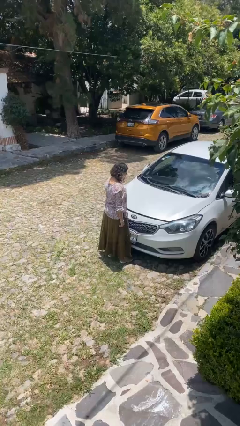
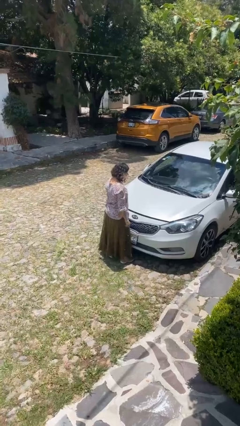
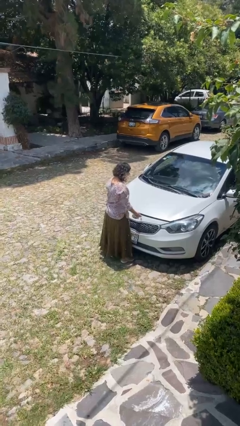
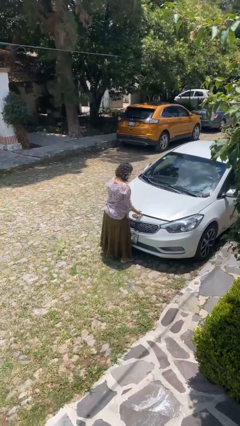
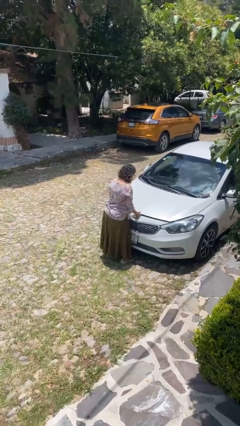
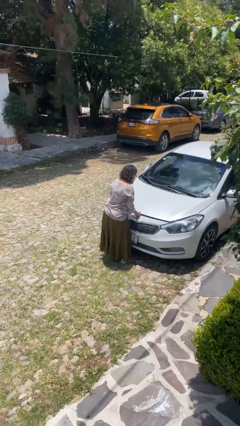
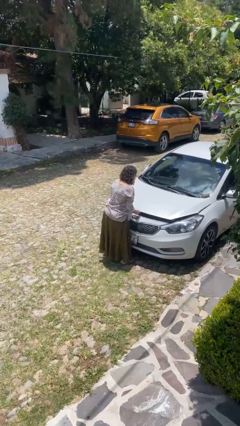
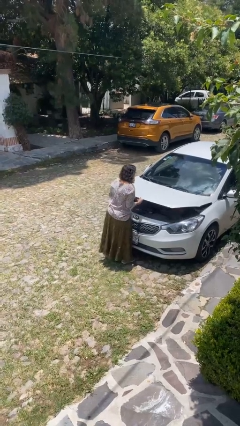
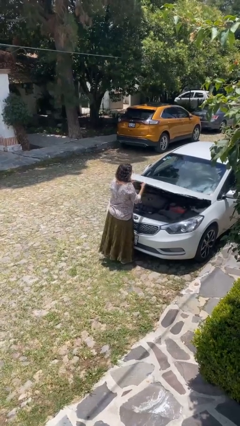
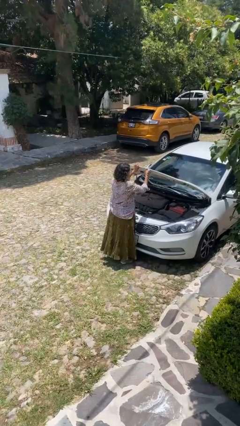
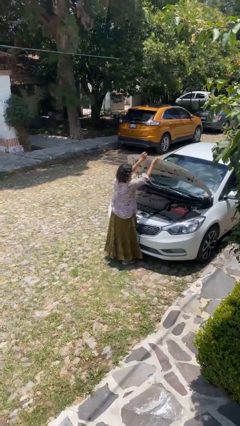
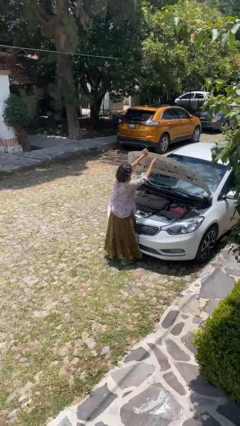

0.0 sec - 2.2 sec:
person opens car hood

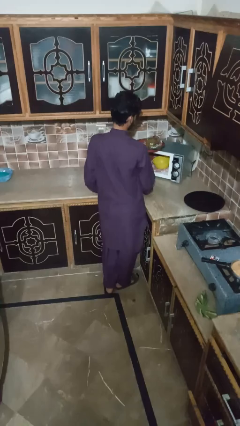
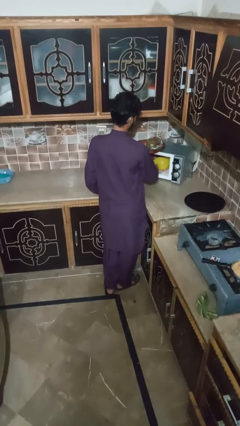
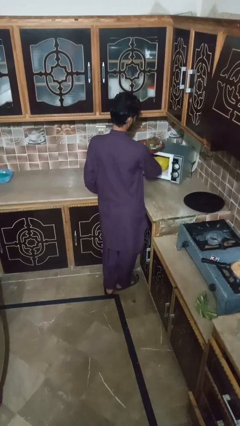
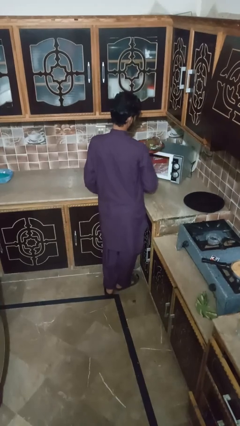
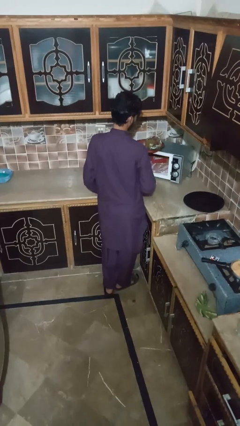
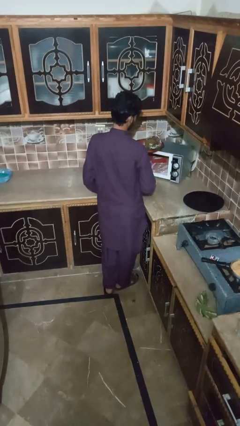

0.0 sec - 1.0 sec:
person takes object from microwave

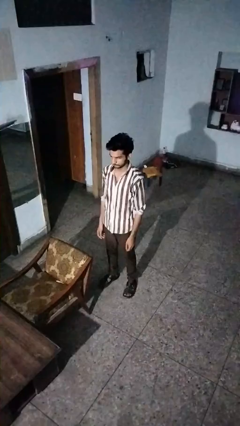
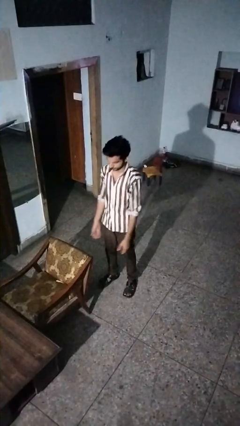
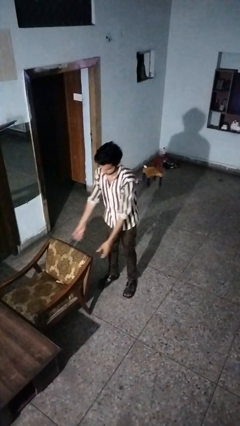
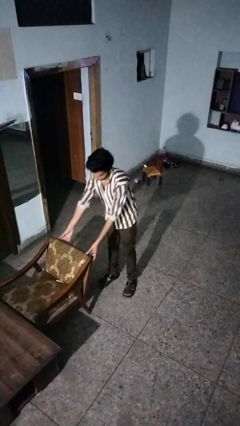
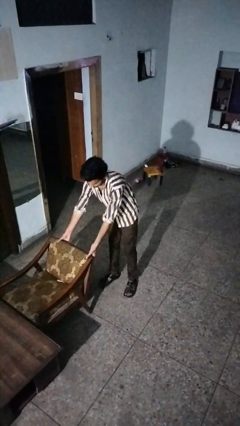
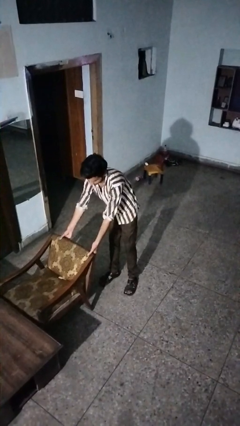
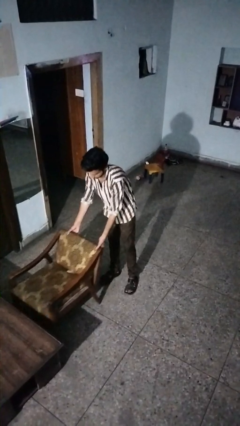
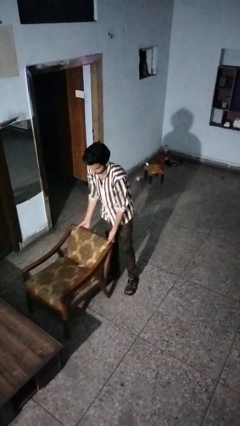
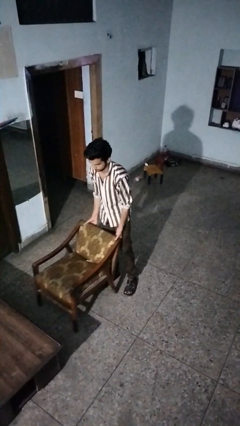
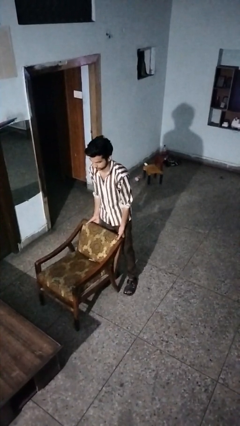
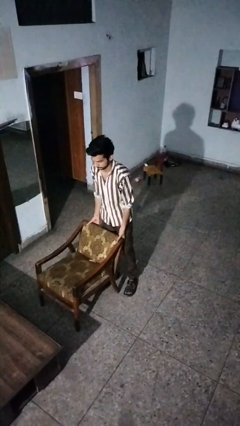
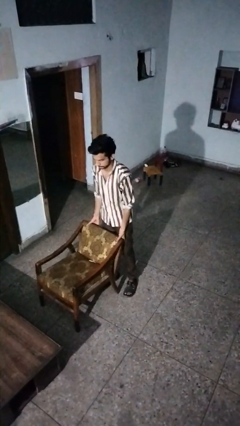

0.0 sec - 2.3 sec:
person pulls out chair

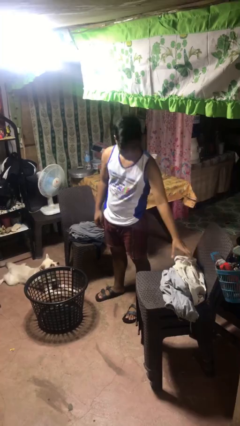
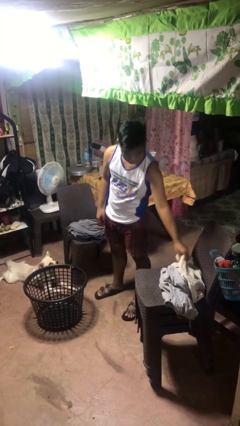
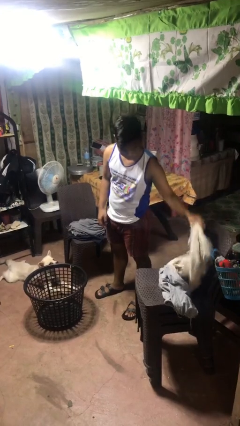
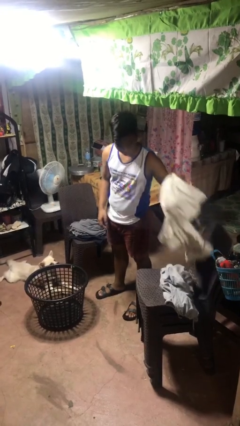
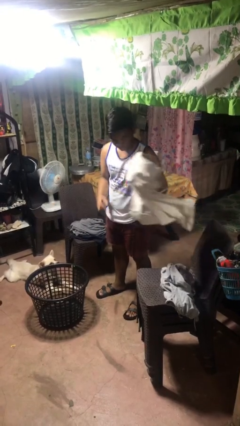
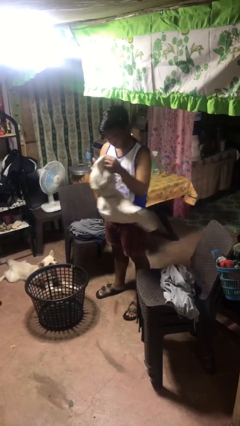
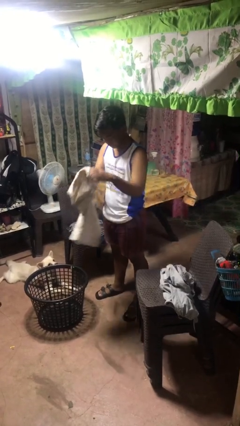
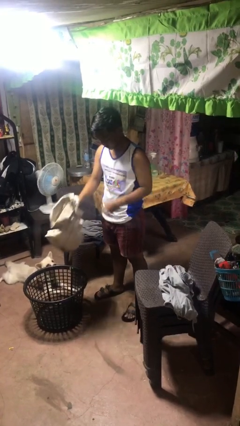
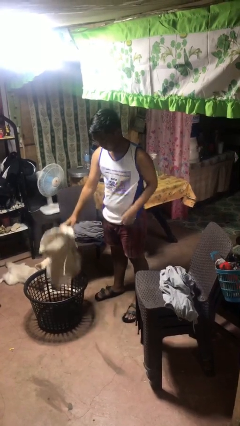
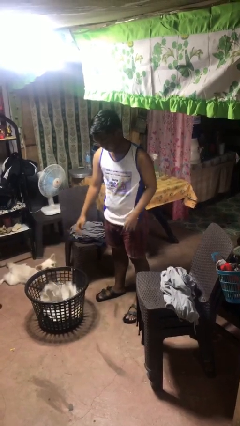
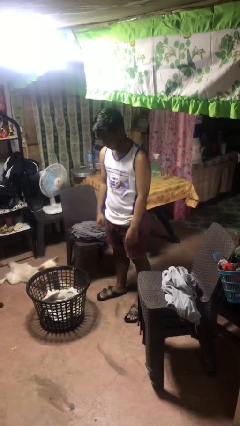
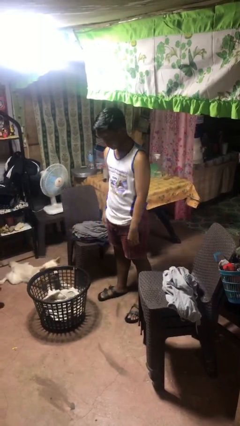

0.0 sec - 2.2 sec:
person puts object into basket

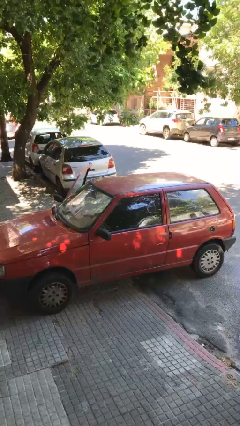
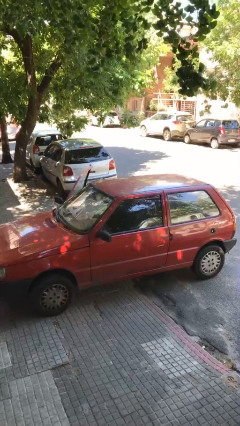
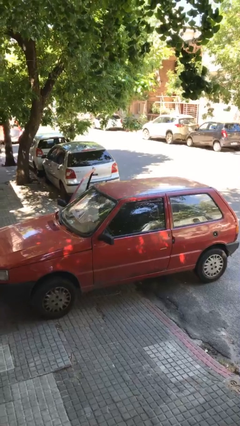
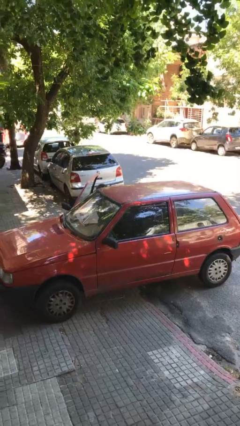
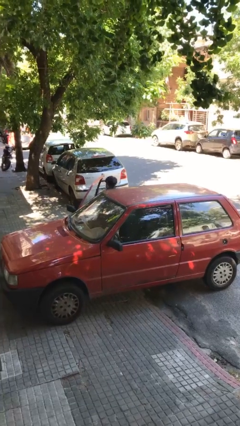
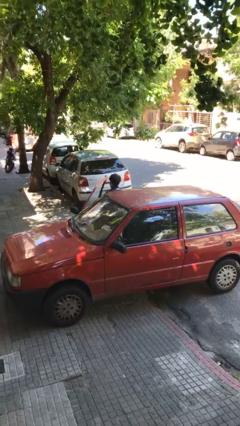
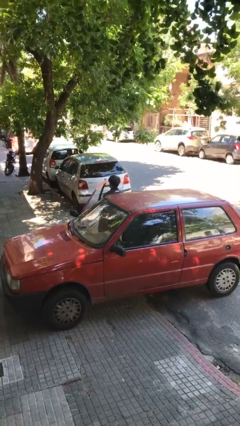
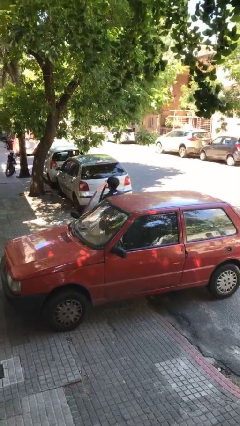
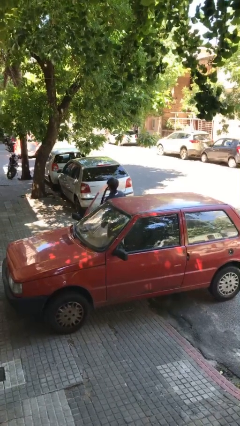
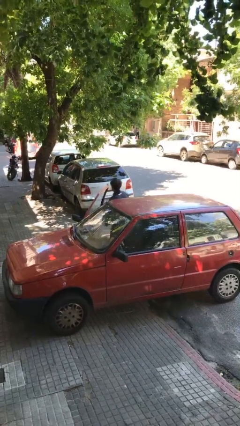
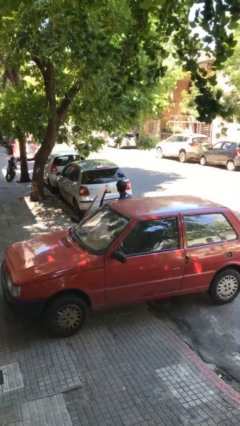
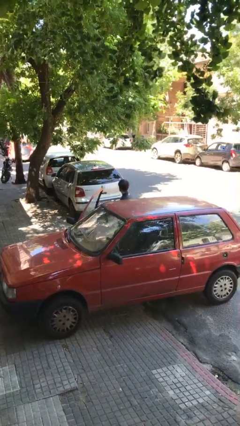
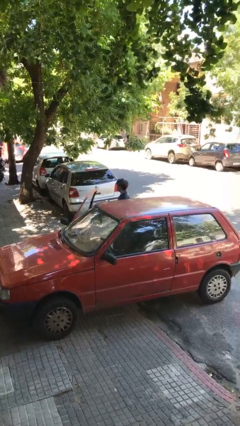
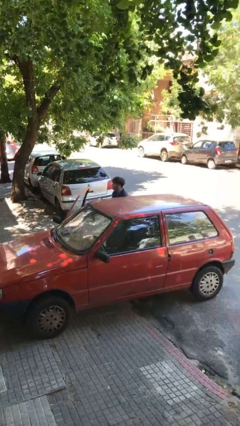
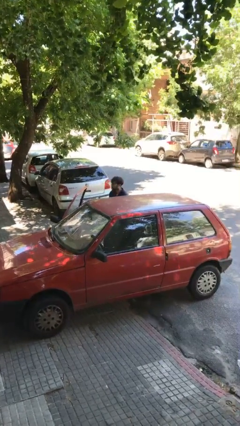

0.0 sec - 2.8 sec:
person exits car

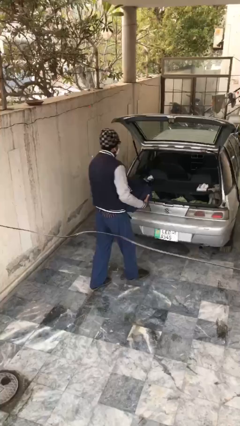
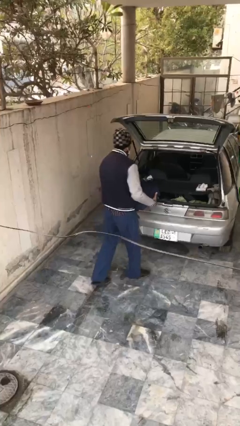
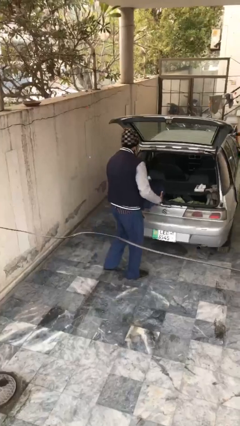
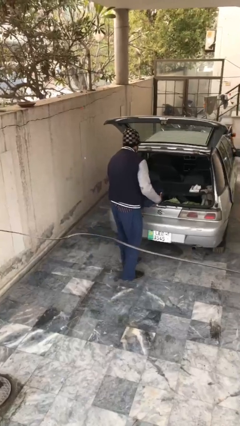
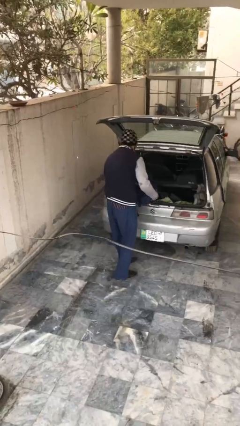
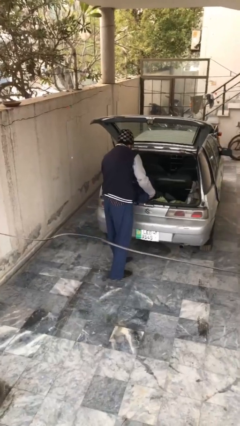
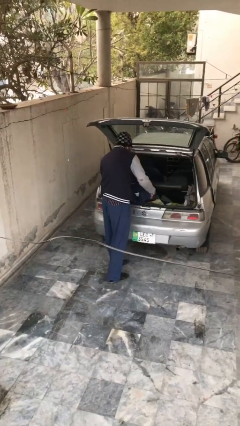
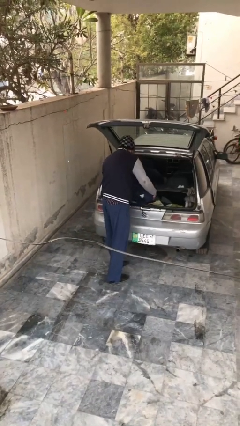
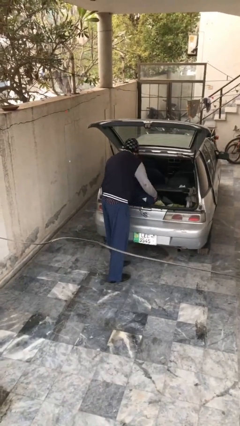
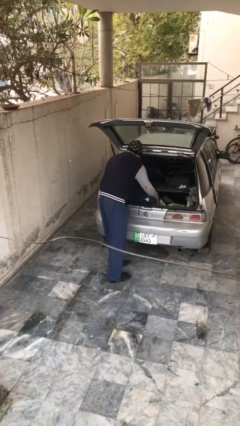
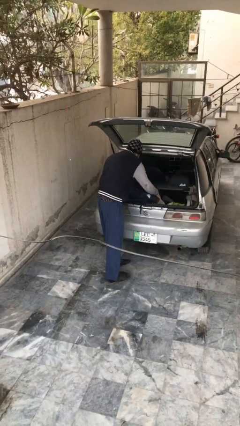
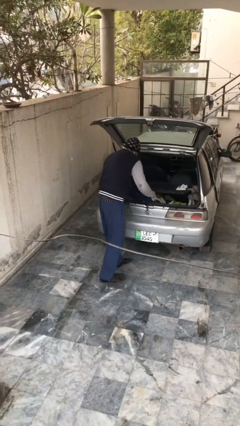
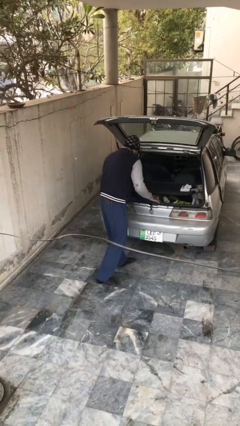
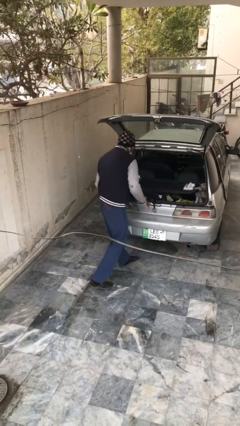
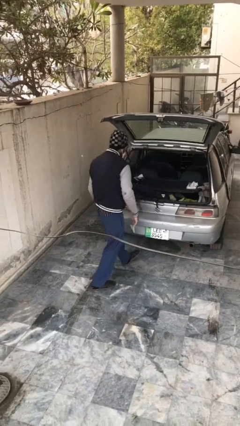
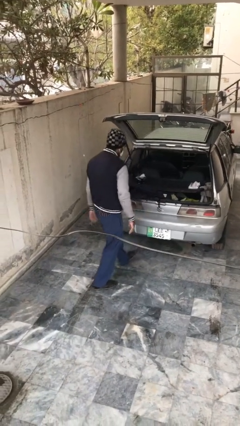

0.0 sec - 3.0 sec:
person loads car

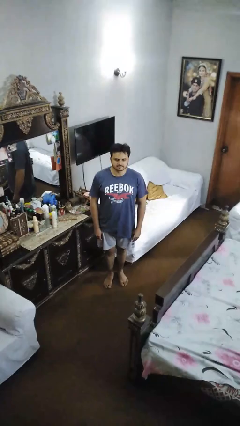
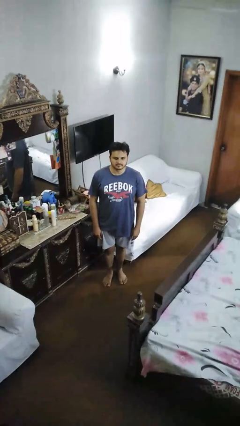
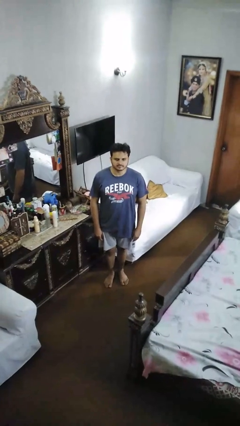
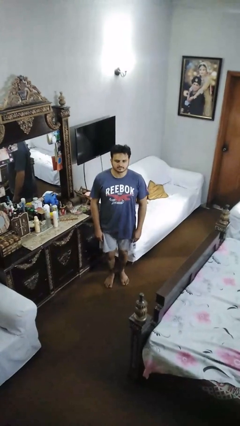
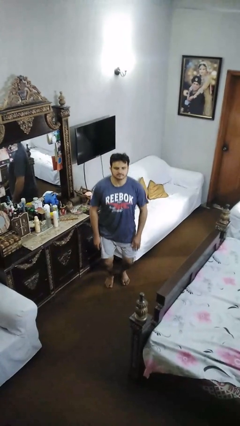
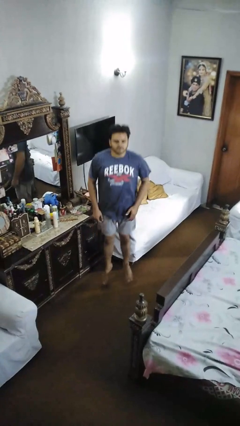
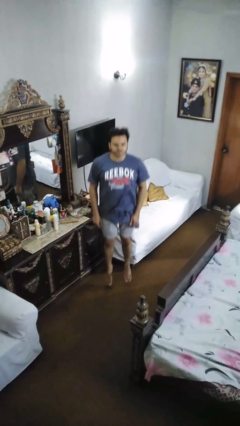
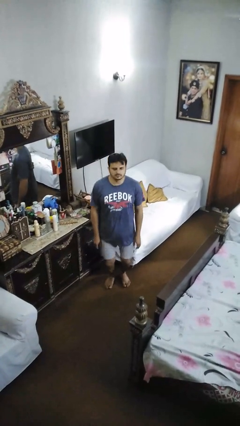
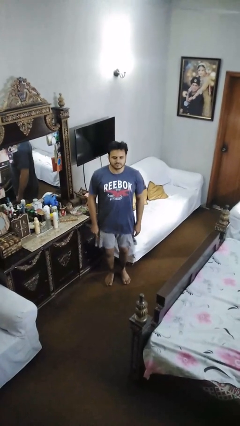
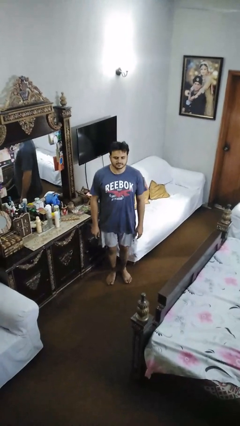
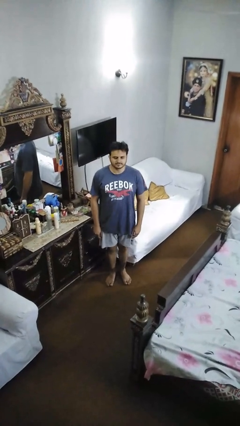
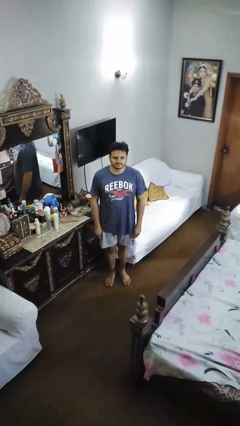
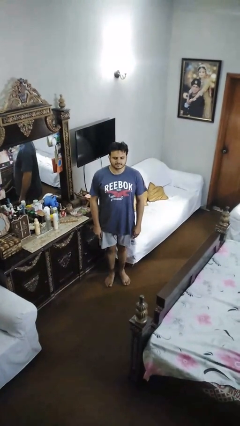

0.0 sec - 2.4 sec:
person jumps

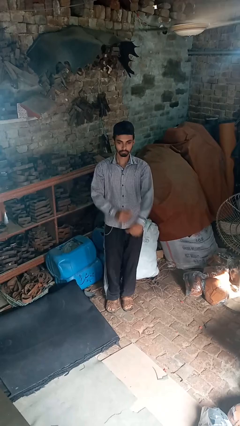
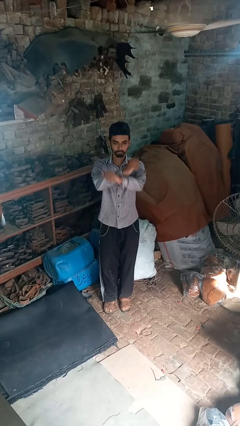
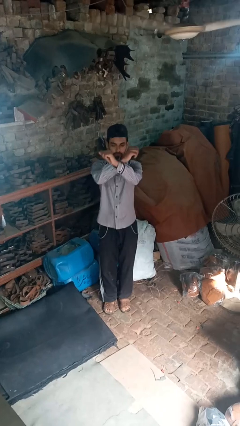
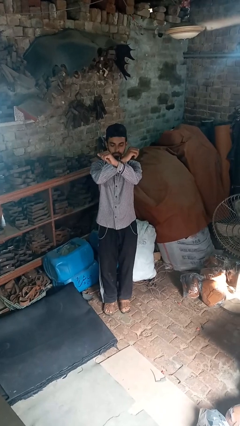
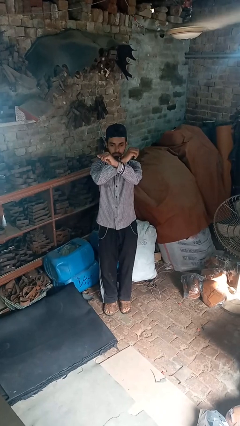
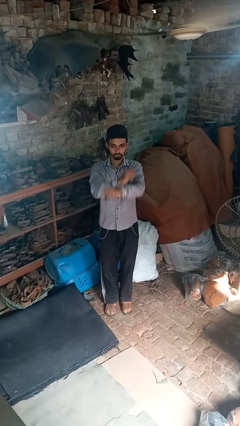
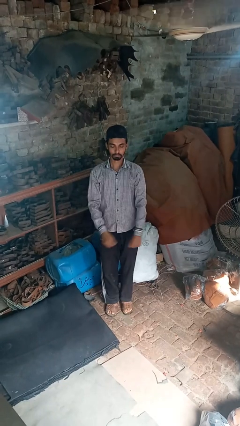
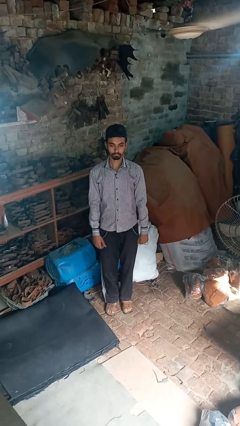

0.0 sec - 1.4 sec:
person karate chop
